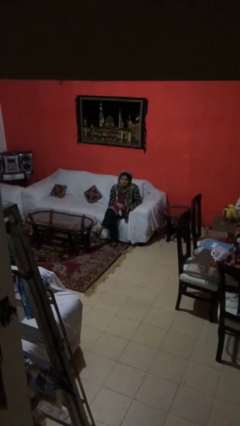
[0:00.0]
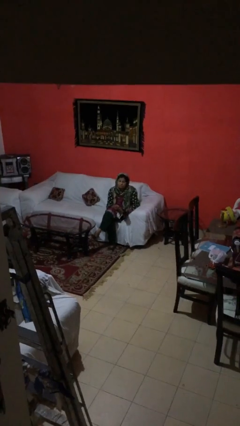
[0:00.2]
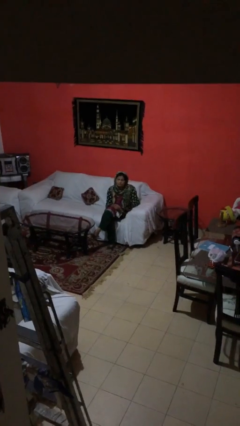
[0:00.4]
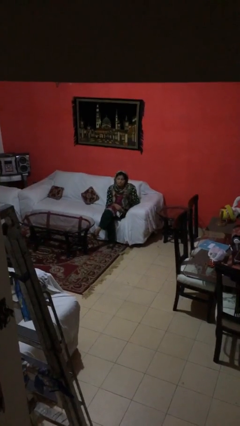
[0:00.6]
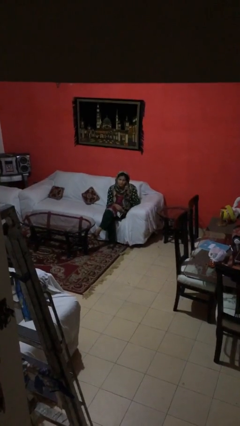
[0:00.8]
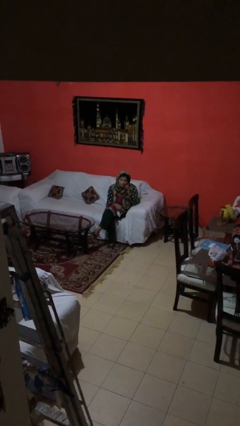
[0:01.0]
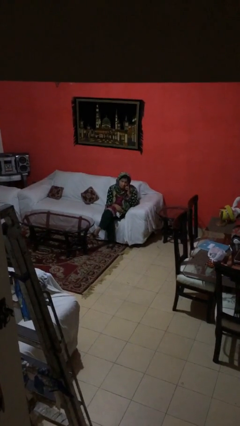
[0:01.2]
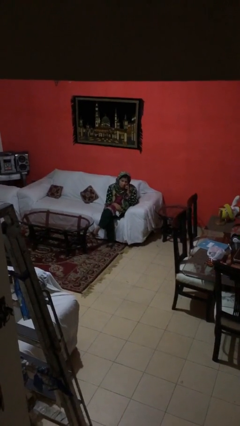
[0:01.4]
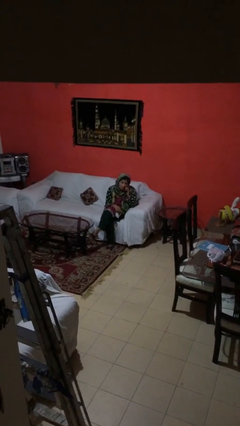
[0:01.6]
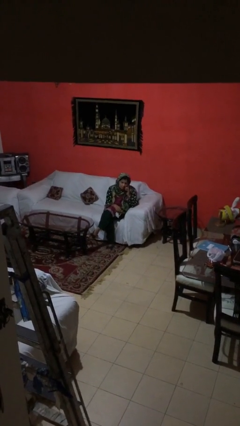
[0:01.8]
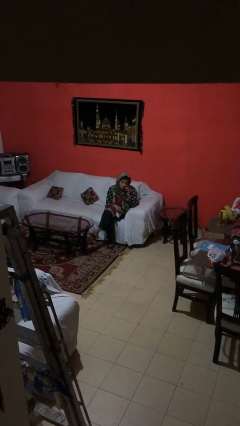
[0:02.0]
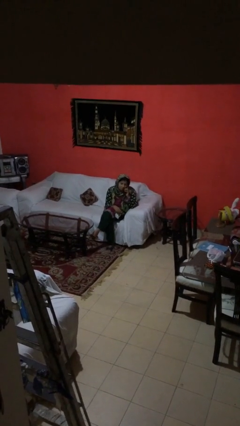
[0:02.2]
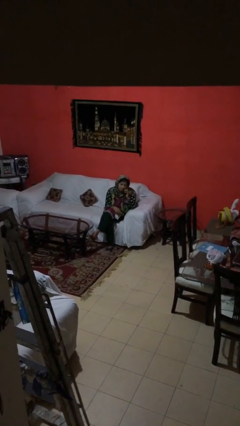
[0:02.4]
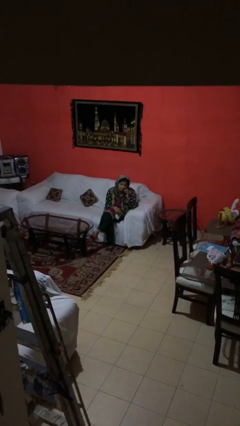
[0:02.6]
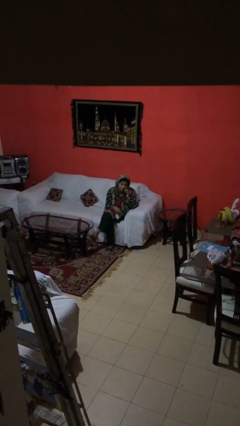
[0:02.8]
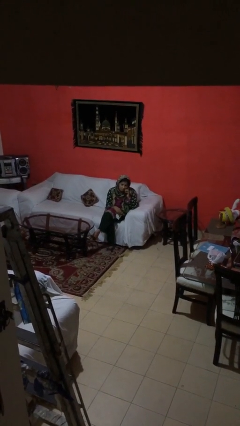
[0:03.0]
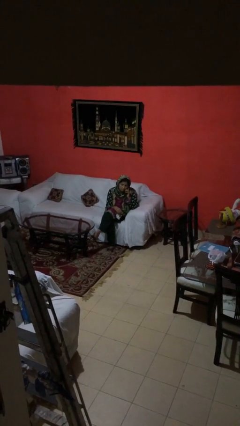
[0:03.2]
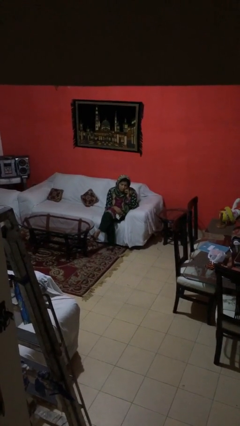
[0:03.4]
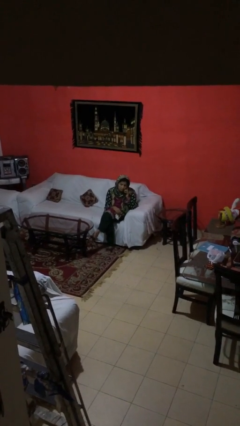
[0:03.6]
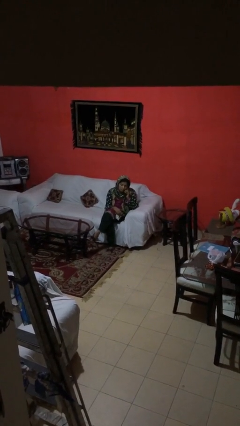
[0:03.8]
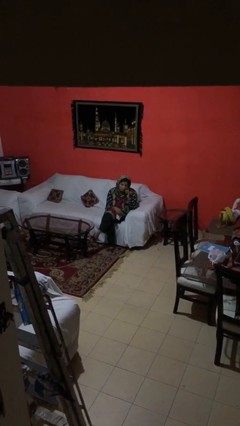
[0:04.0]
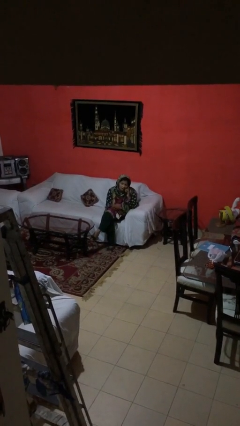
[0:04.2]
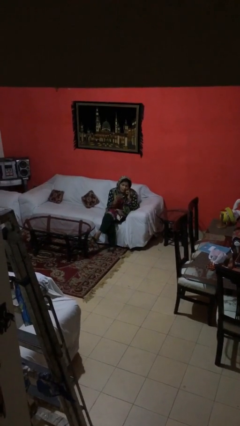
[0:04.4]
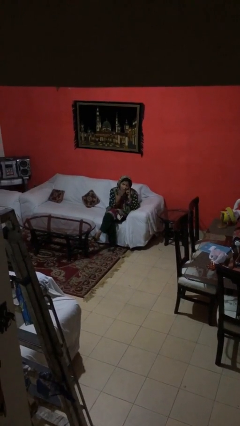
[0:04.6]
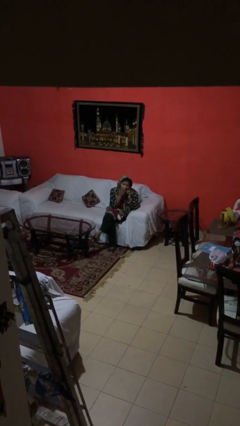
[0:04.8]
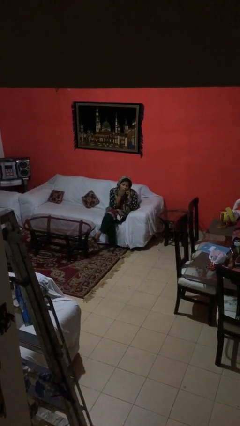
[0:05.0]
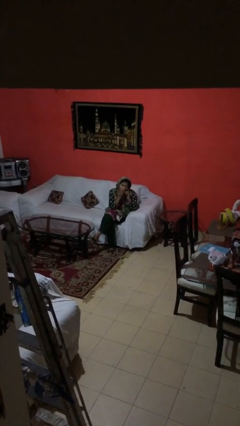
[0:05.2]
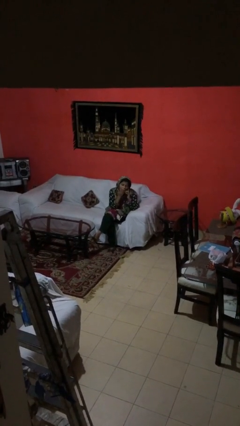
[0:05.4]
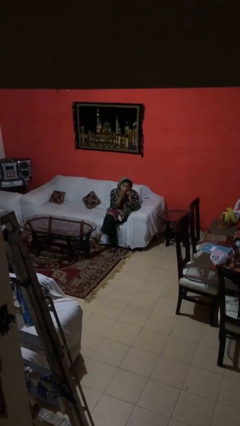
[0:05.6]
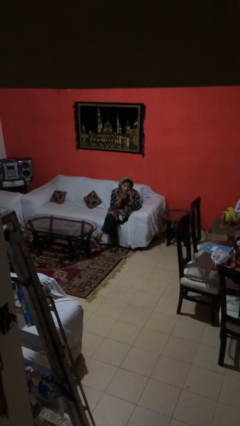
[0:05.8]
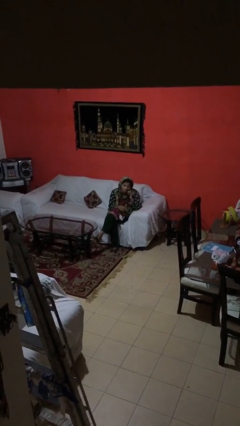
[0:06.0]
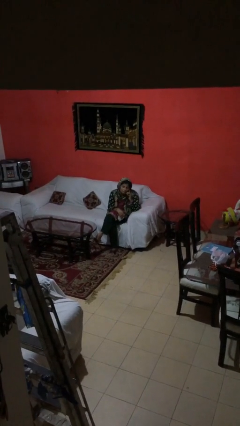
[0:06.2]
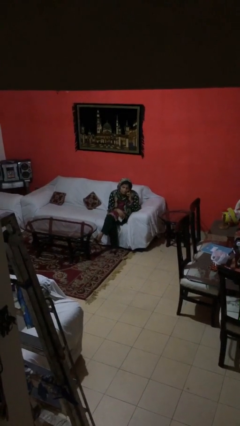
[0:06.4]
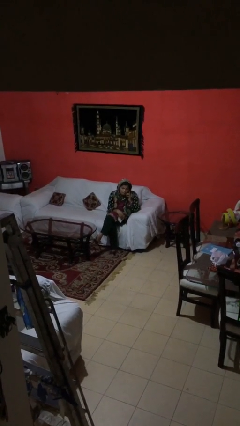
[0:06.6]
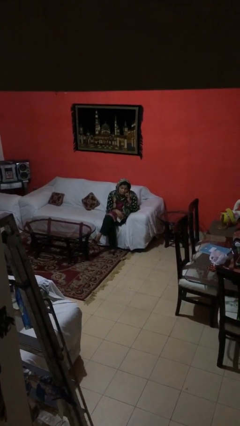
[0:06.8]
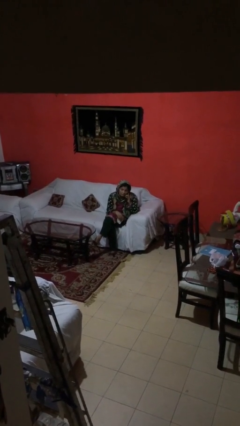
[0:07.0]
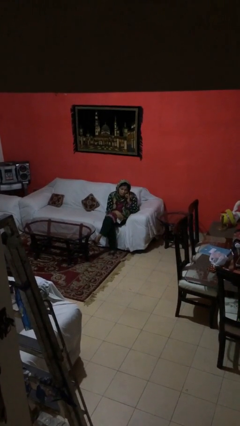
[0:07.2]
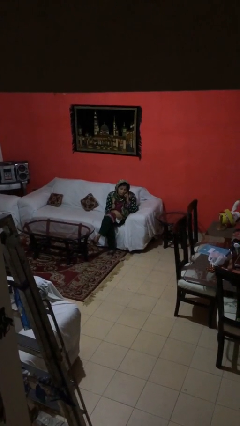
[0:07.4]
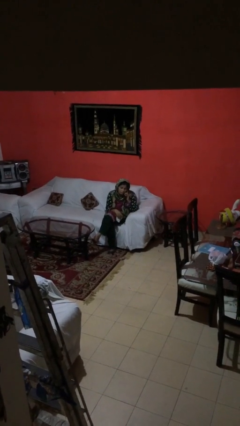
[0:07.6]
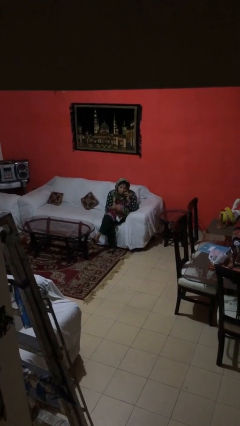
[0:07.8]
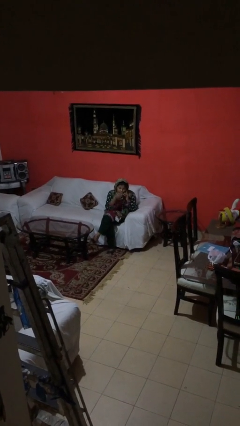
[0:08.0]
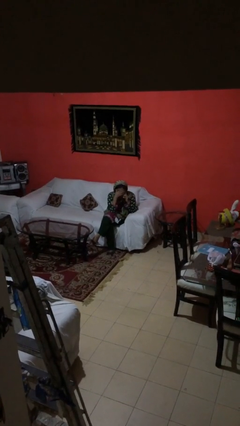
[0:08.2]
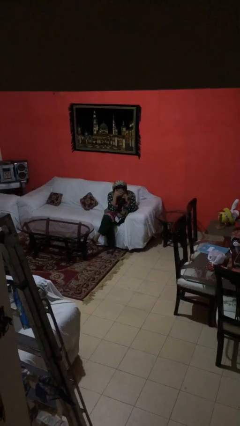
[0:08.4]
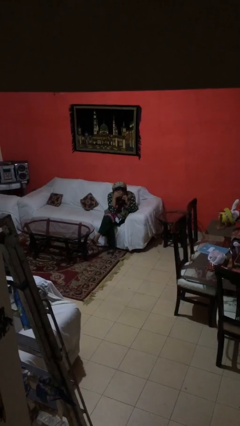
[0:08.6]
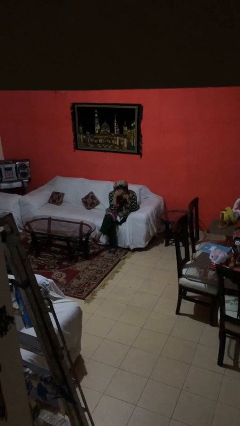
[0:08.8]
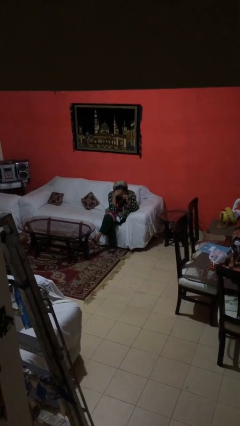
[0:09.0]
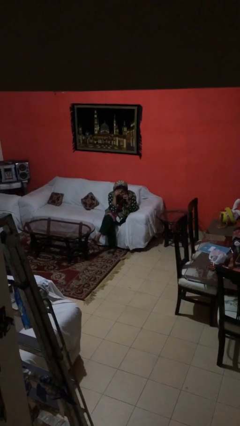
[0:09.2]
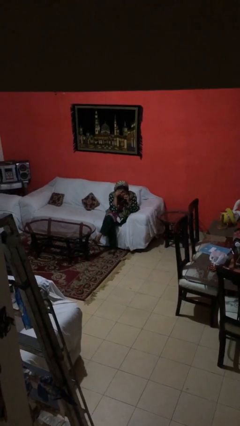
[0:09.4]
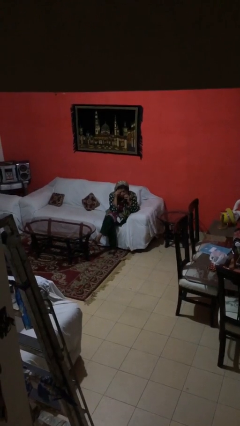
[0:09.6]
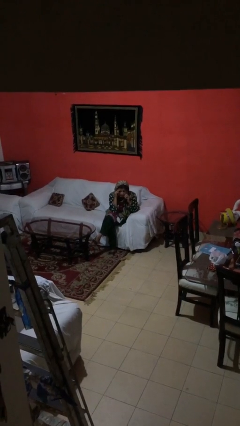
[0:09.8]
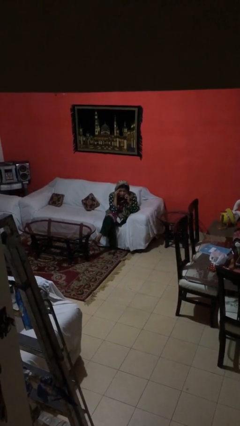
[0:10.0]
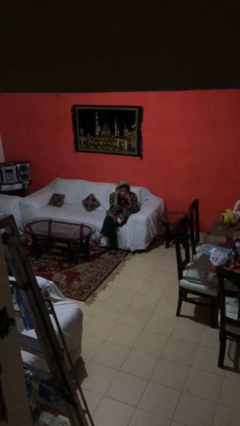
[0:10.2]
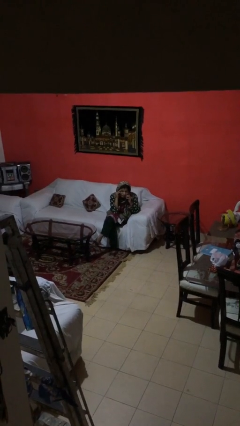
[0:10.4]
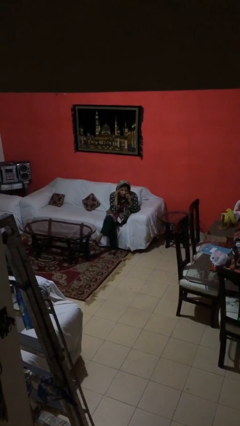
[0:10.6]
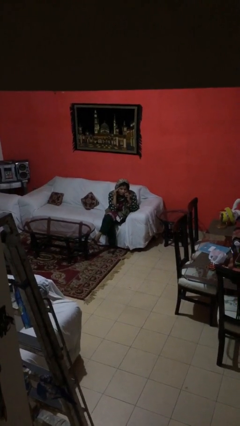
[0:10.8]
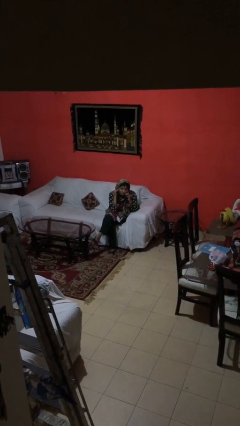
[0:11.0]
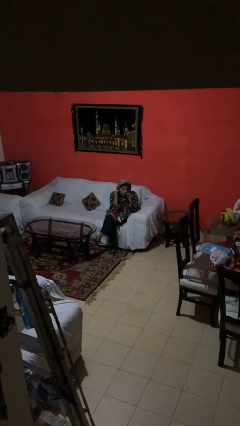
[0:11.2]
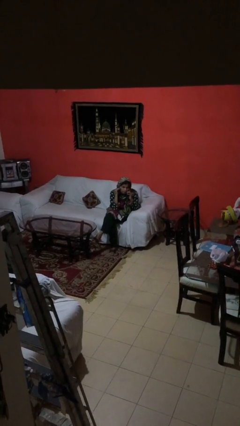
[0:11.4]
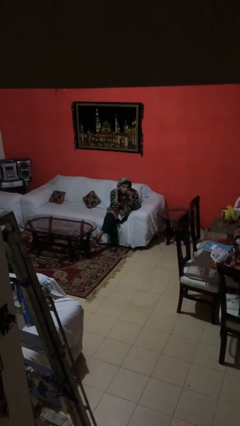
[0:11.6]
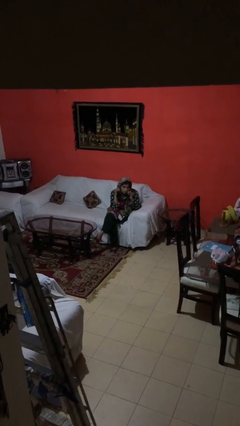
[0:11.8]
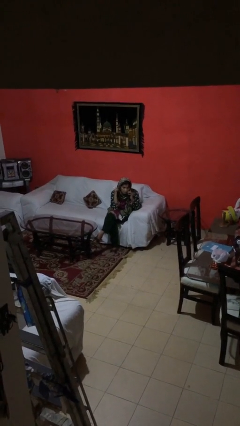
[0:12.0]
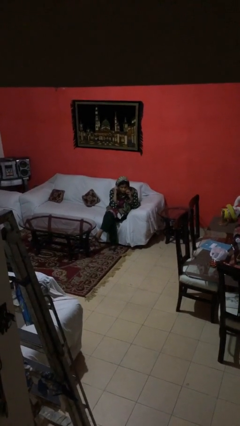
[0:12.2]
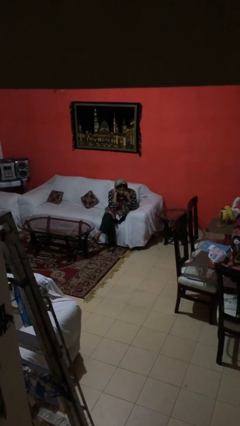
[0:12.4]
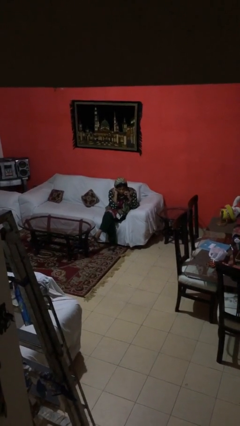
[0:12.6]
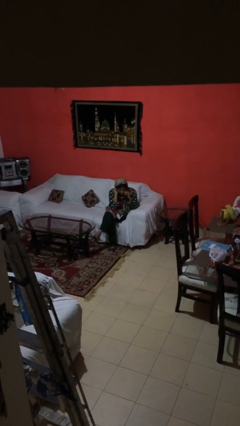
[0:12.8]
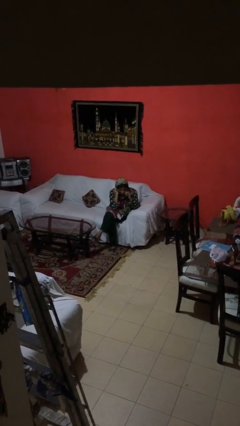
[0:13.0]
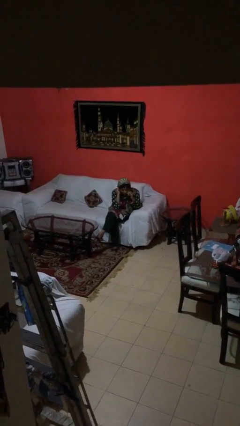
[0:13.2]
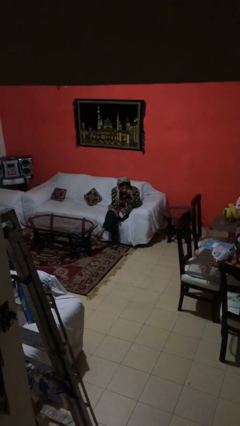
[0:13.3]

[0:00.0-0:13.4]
person talks on phone

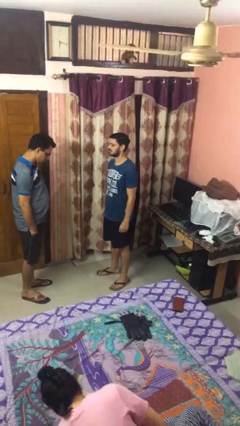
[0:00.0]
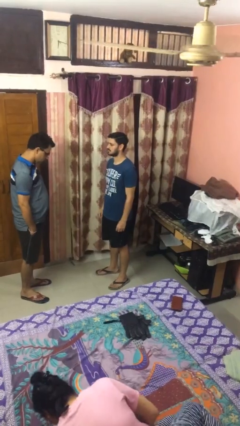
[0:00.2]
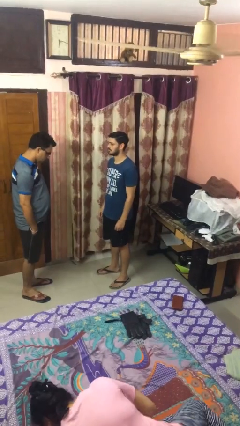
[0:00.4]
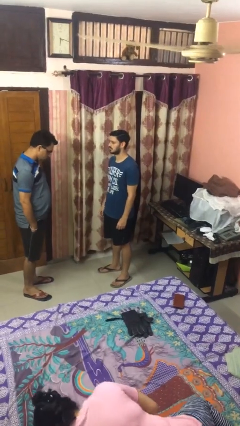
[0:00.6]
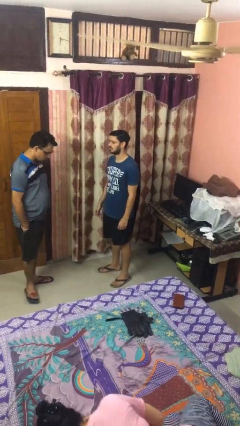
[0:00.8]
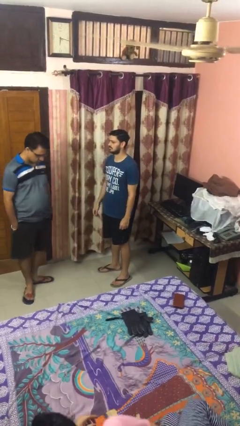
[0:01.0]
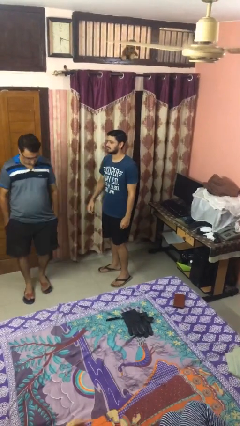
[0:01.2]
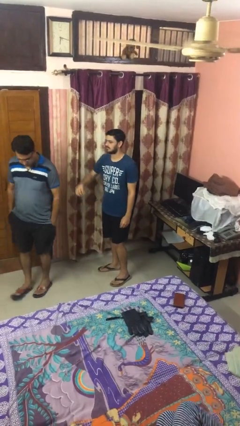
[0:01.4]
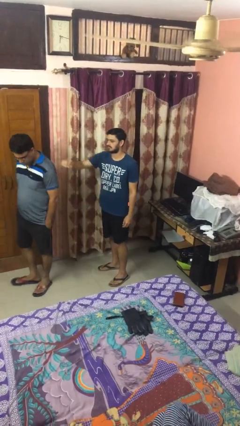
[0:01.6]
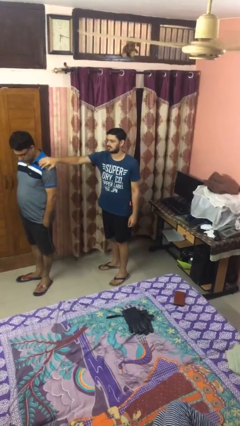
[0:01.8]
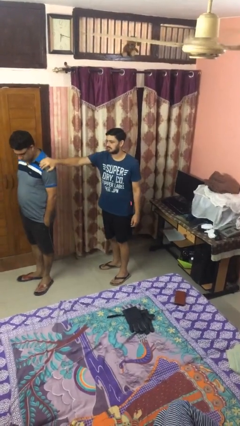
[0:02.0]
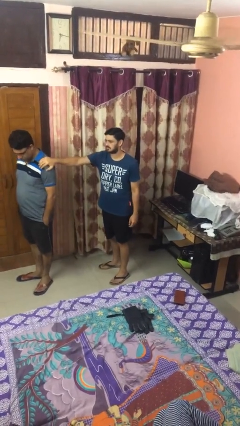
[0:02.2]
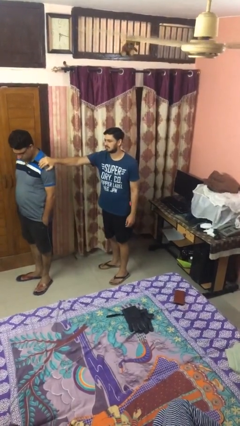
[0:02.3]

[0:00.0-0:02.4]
person grabs person by shoulder

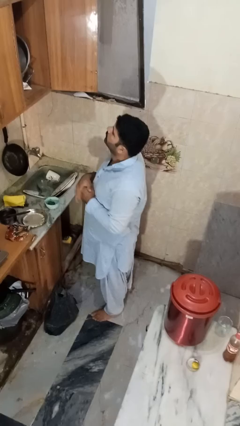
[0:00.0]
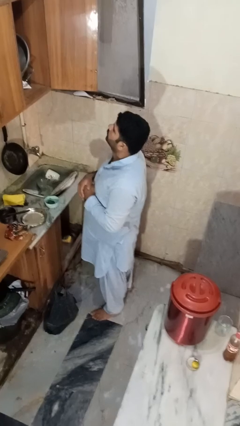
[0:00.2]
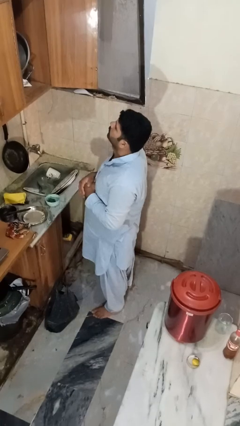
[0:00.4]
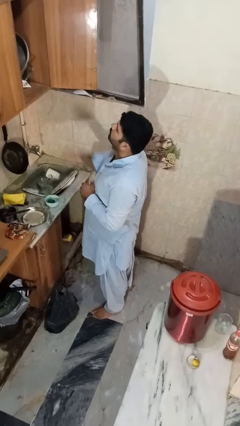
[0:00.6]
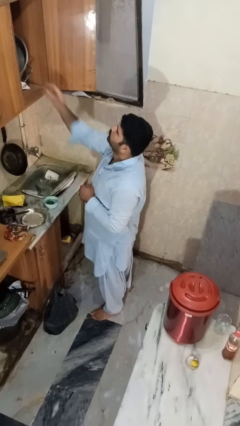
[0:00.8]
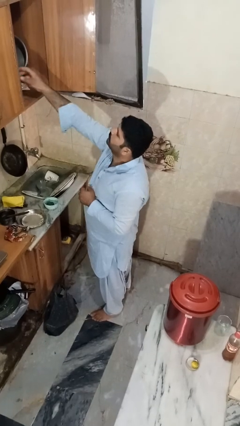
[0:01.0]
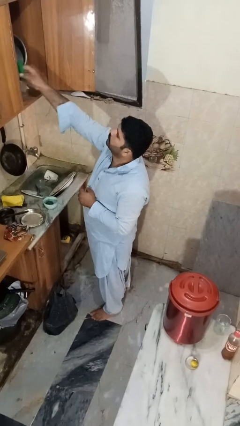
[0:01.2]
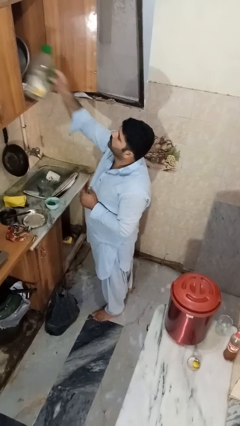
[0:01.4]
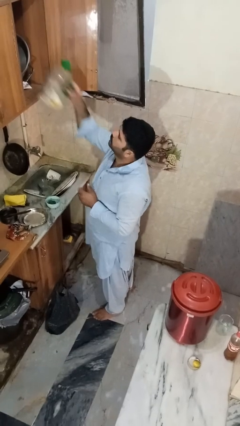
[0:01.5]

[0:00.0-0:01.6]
person takes object from cabinet

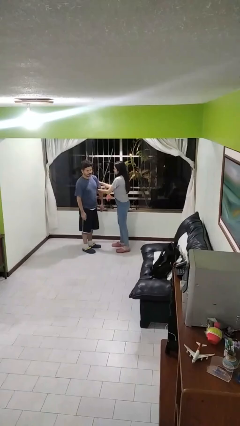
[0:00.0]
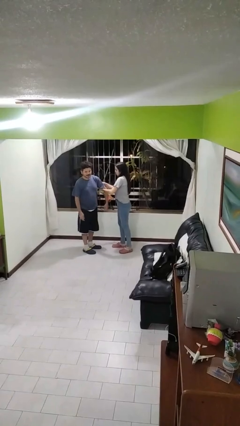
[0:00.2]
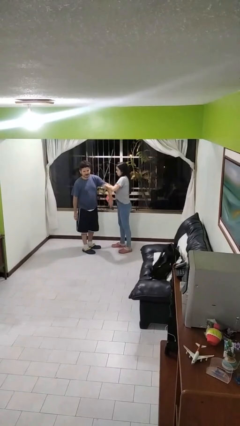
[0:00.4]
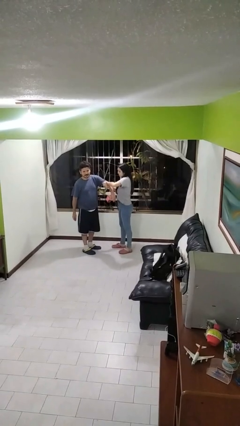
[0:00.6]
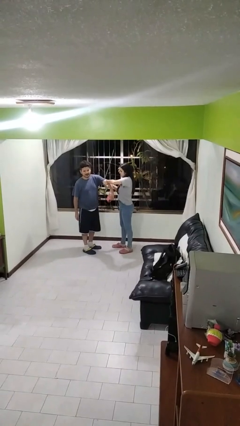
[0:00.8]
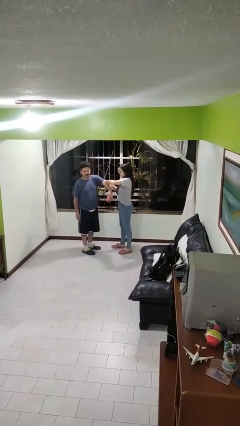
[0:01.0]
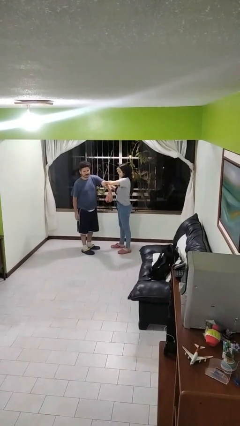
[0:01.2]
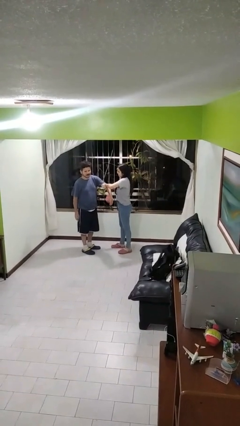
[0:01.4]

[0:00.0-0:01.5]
person grabs person by bicep
